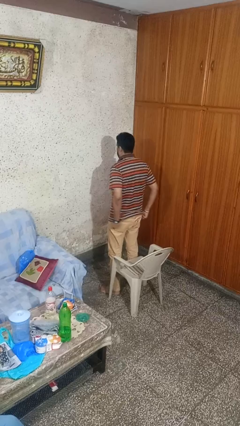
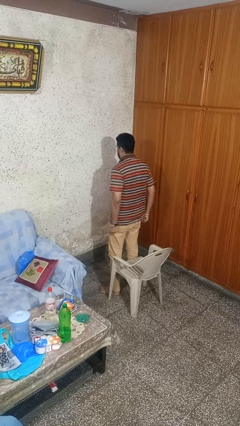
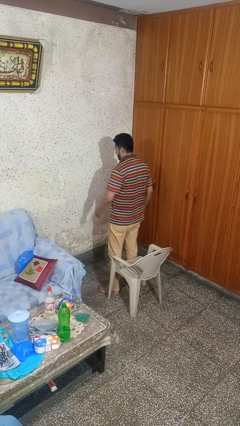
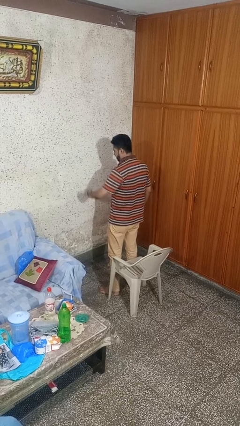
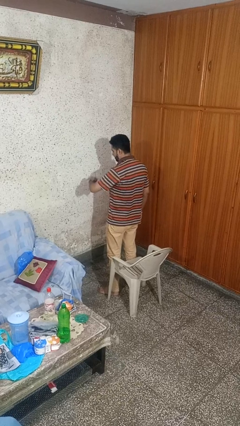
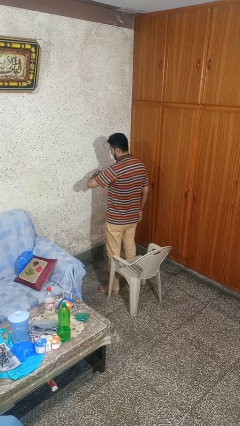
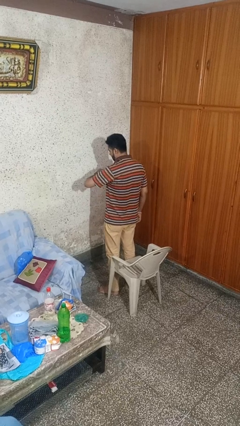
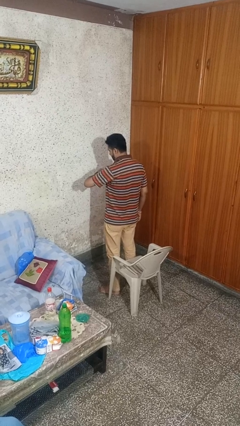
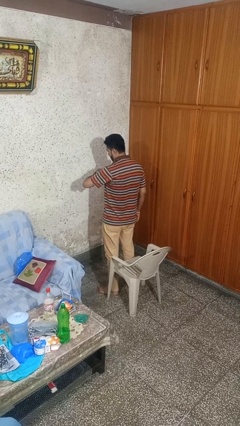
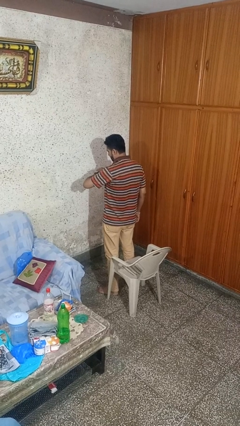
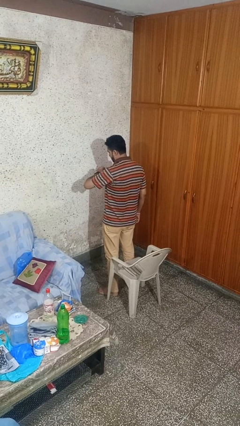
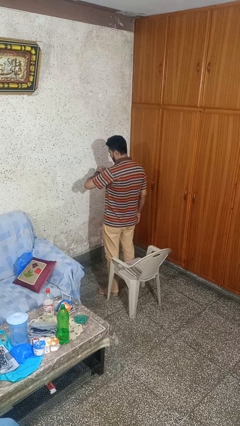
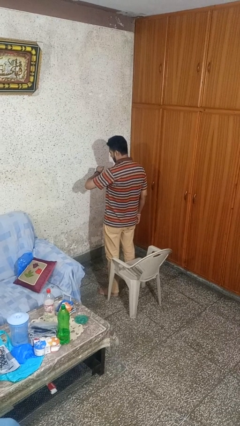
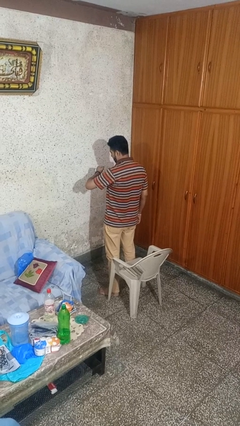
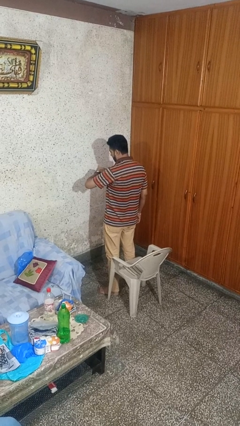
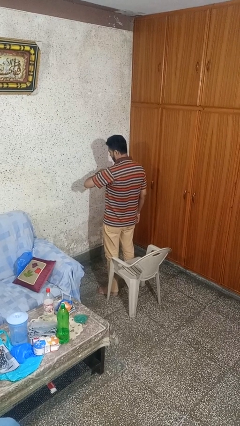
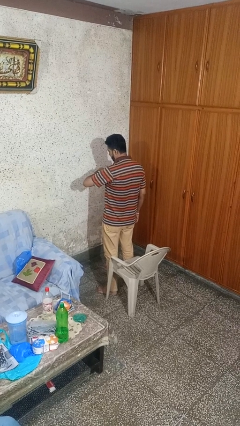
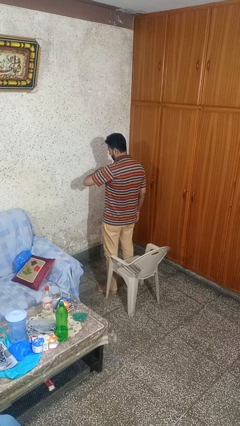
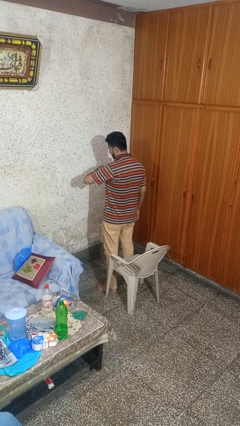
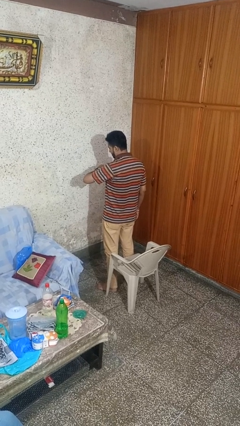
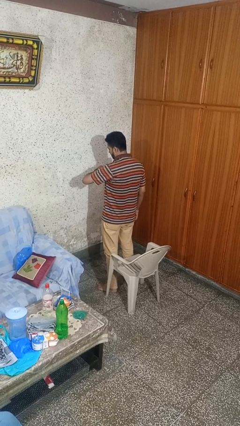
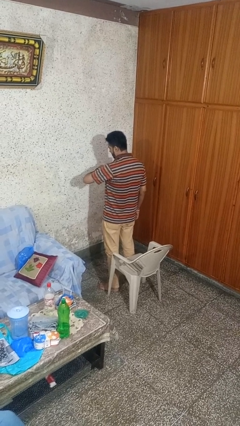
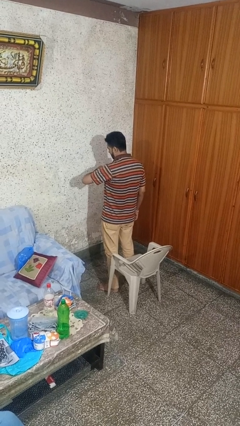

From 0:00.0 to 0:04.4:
person looks at wristwatch

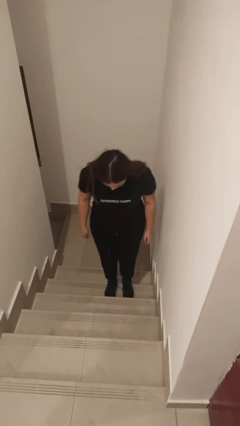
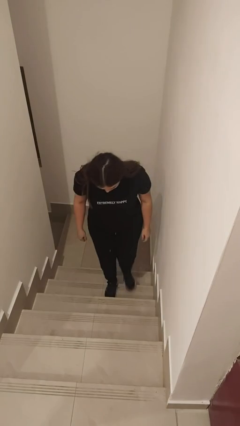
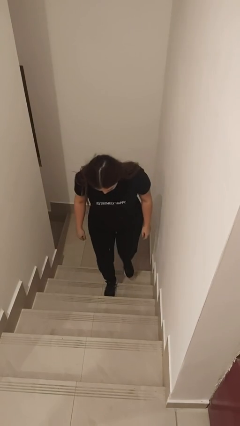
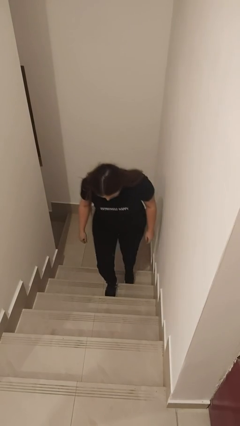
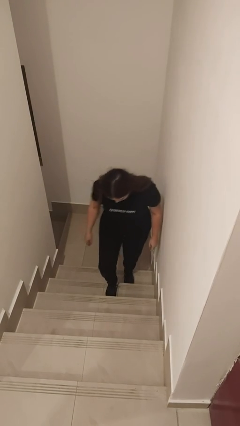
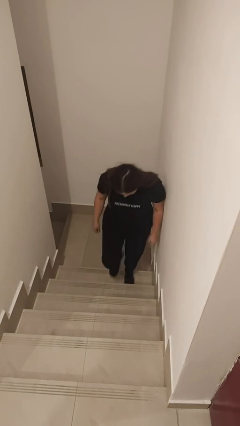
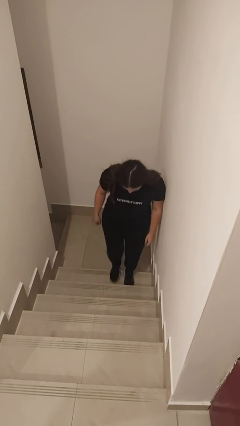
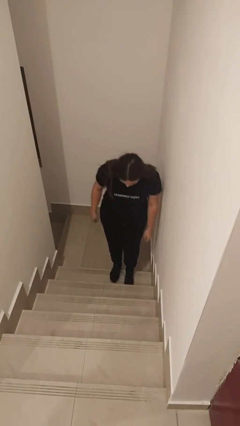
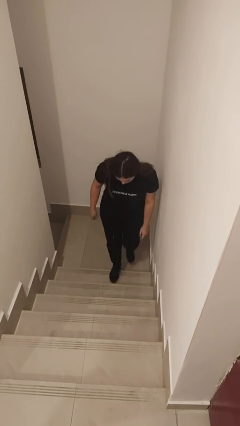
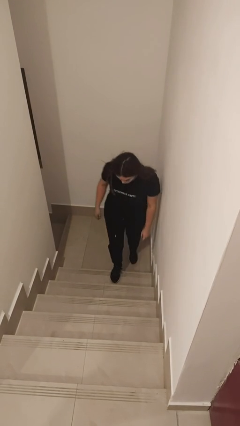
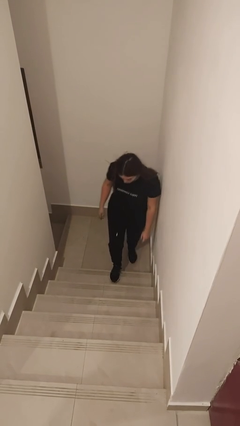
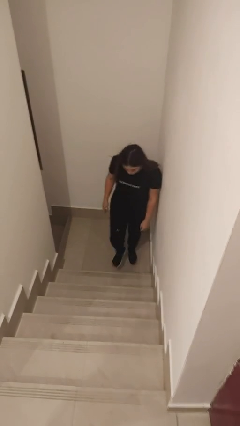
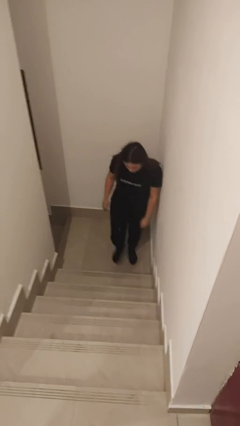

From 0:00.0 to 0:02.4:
person climbs down stairs

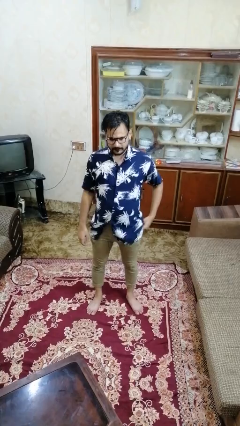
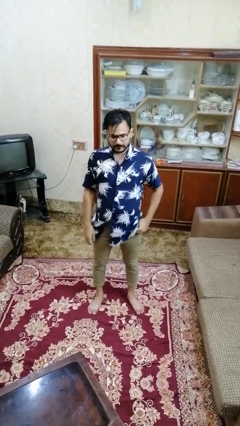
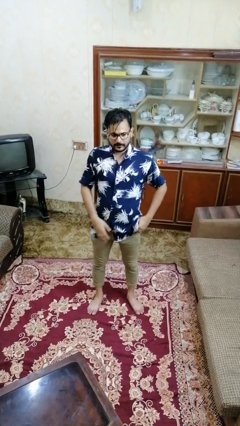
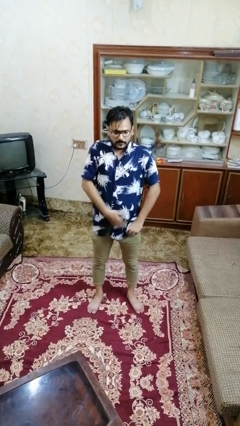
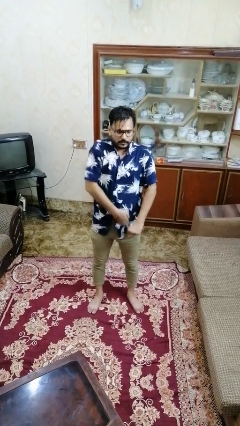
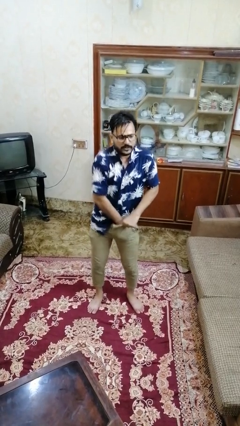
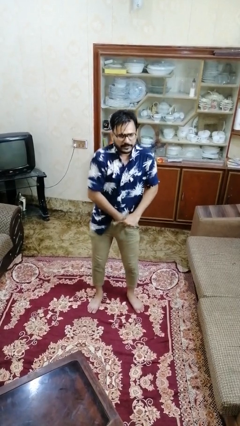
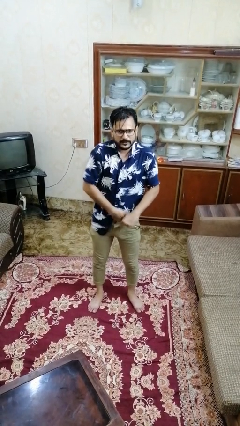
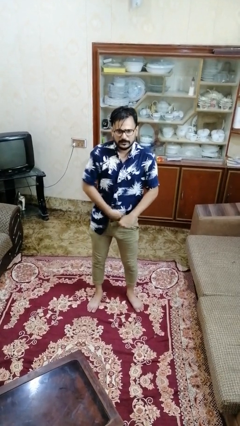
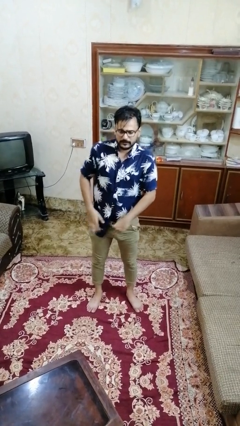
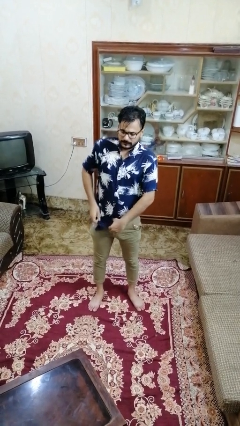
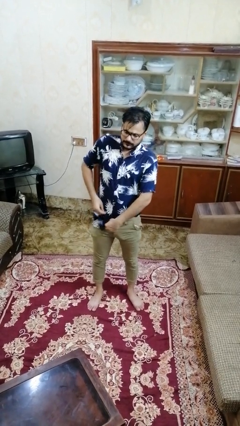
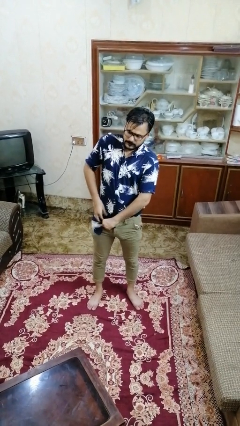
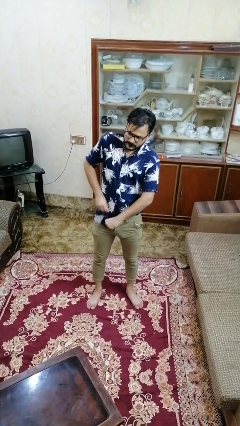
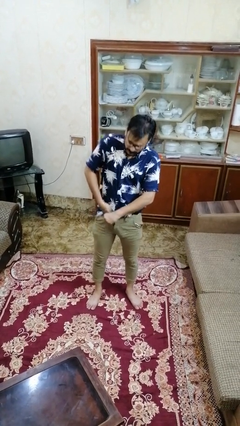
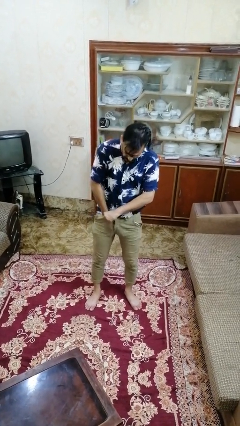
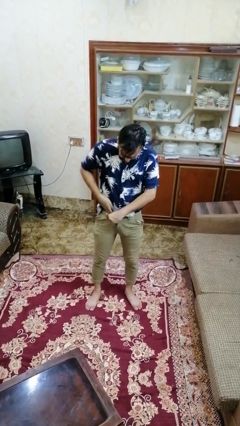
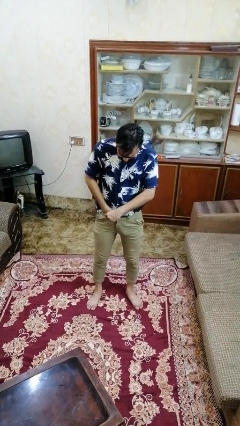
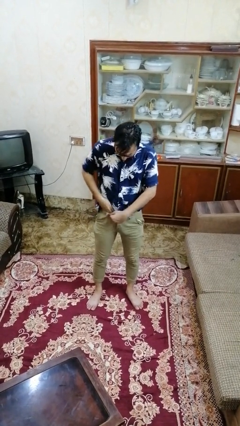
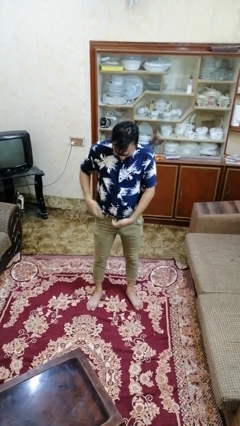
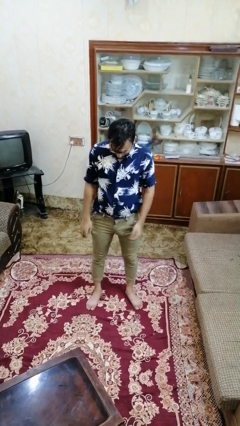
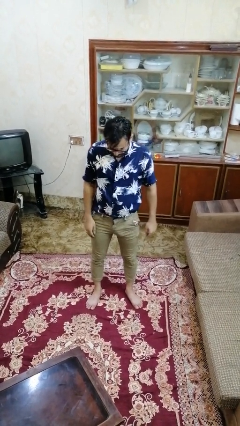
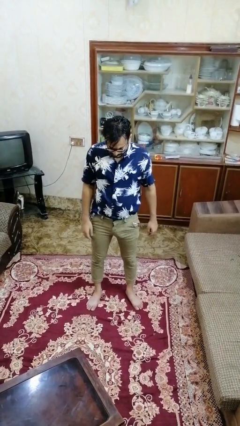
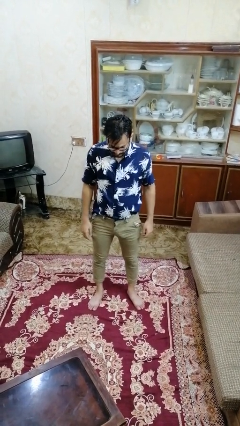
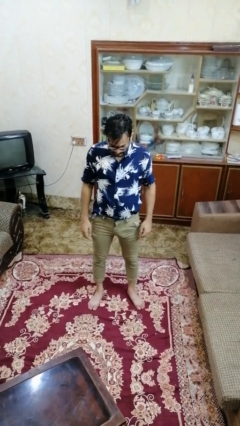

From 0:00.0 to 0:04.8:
person tucks in shirt

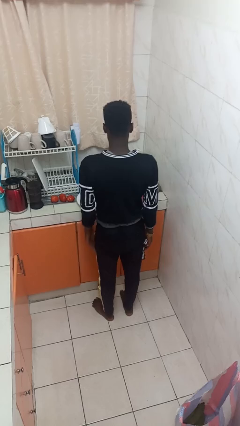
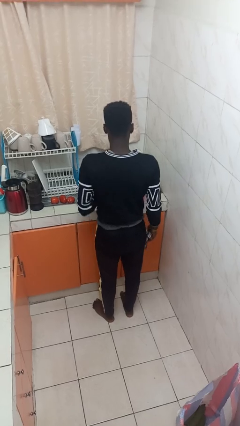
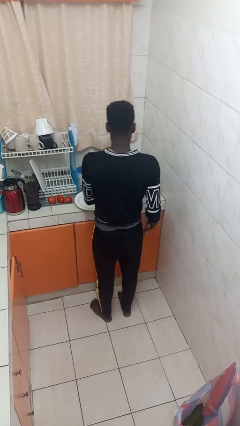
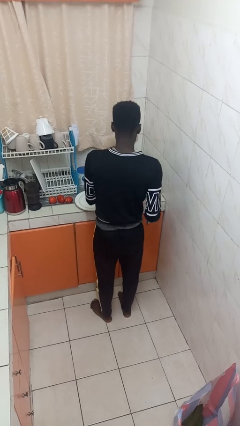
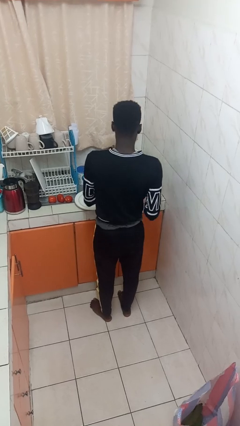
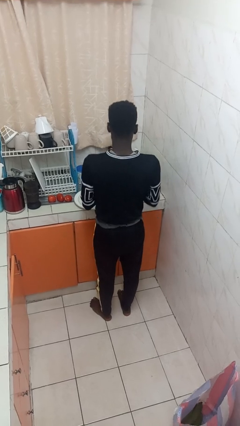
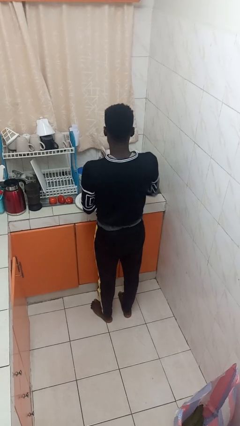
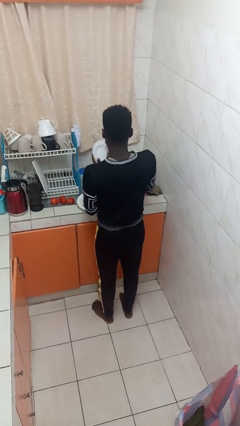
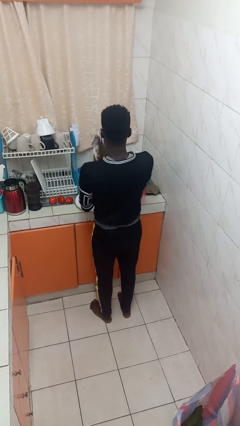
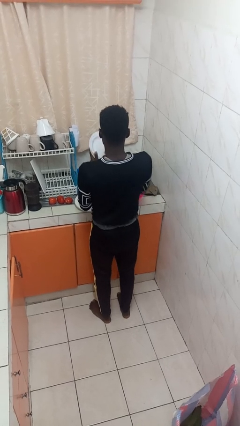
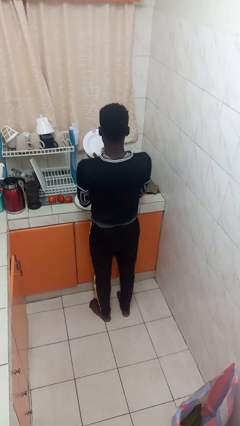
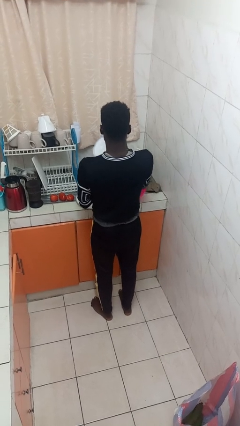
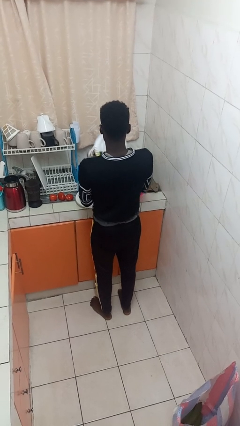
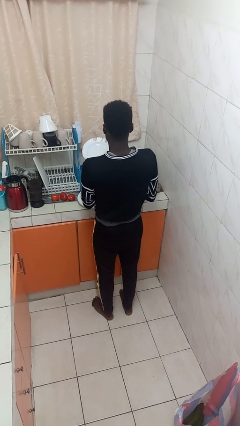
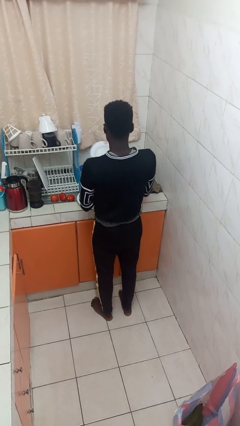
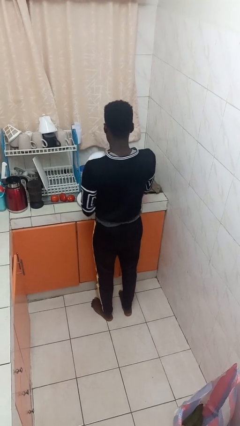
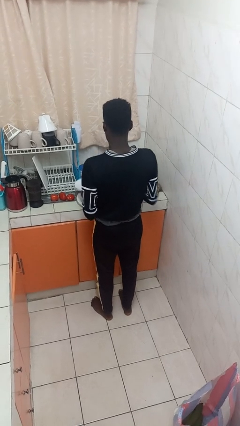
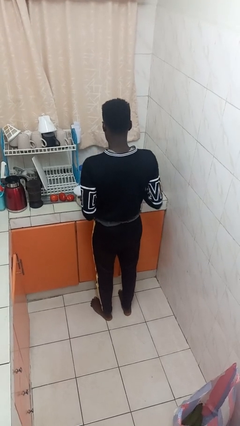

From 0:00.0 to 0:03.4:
person dries dish

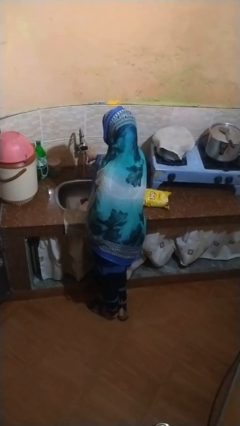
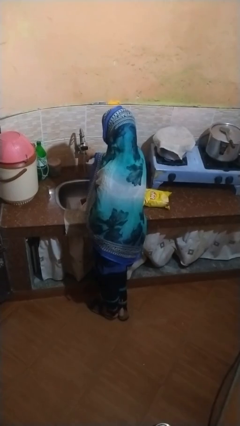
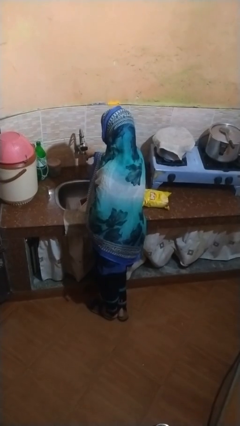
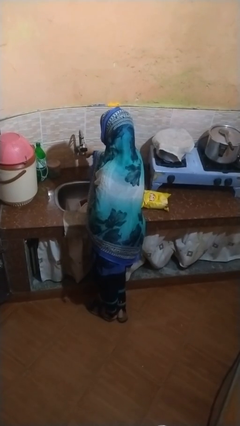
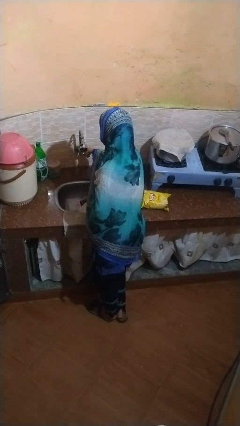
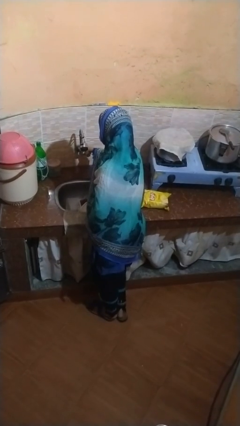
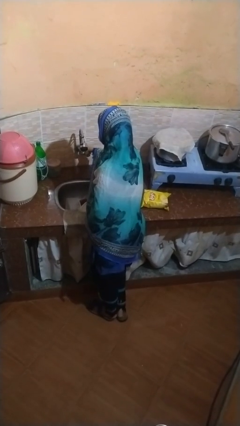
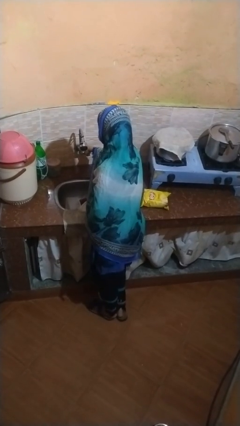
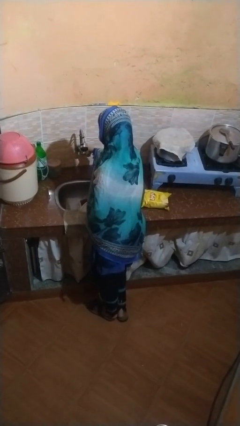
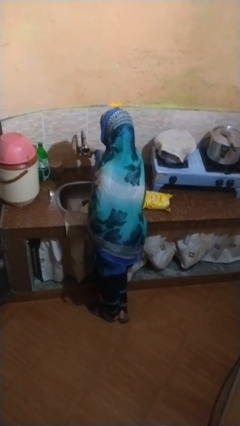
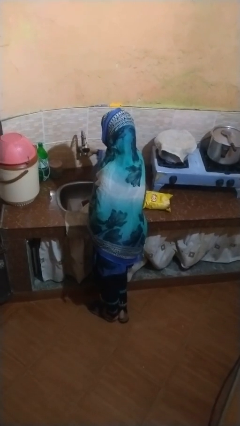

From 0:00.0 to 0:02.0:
person turns off faucet

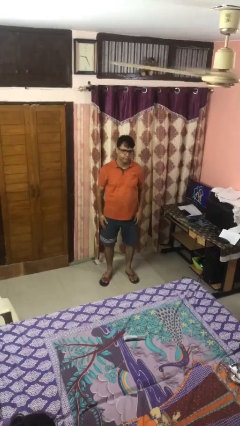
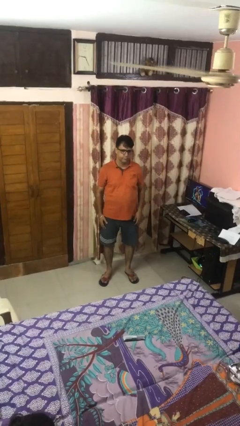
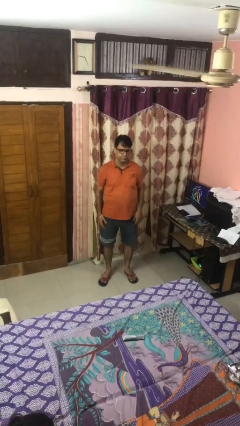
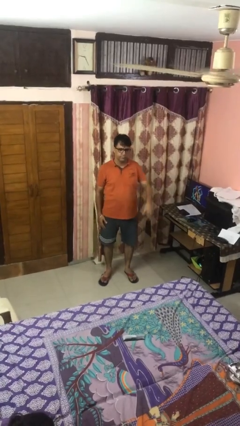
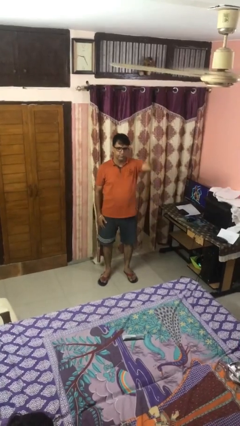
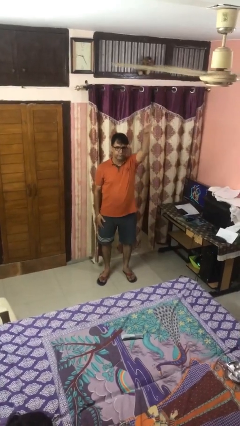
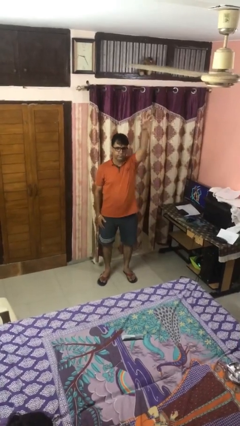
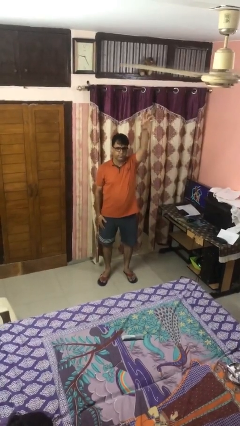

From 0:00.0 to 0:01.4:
person gestures raise hand
